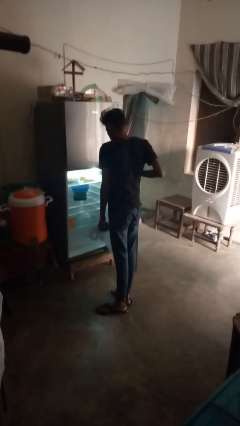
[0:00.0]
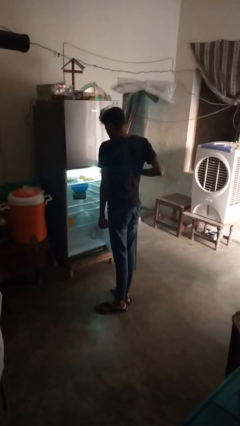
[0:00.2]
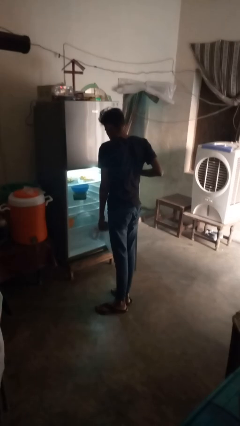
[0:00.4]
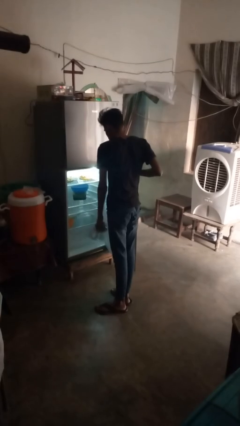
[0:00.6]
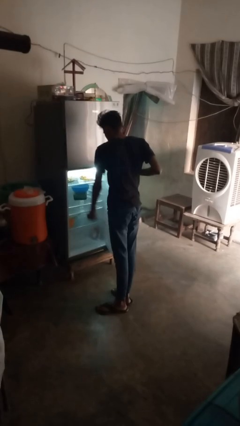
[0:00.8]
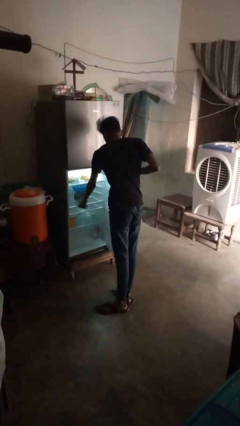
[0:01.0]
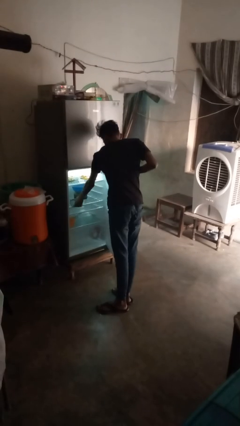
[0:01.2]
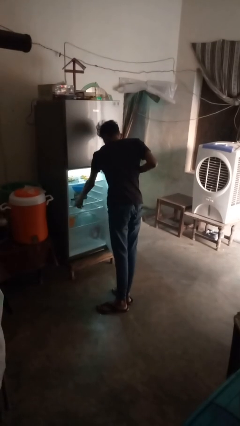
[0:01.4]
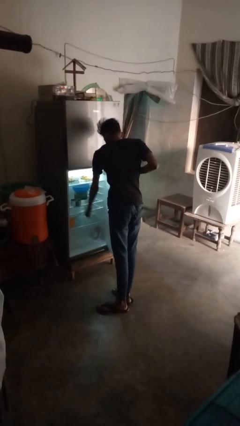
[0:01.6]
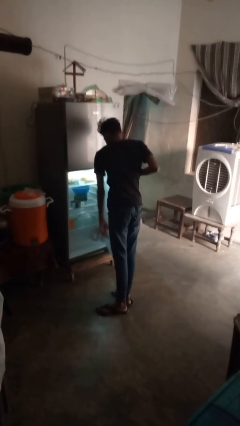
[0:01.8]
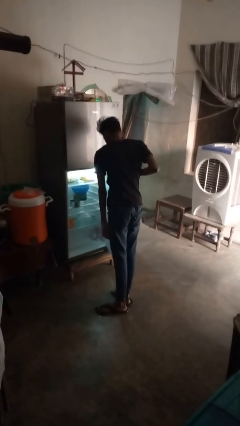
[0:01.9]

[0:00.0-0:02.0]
person puts object into refrigerator

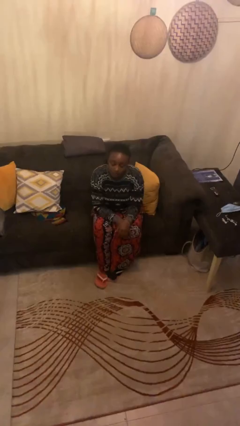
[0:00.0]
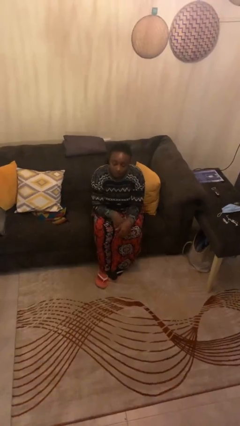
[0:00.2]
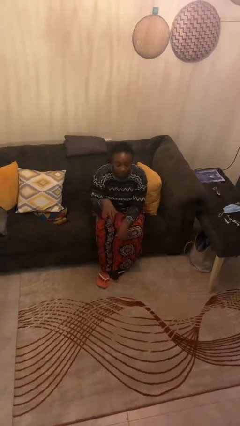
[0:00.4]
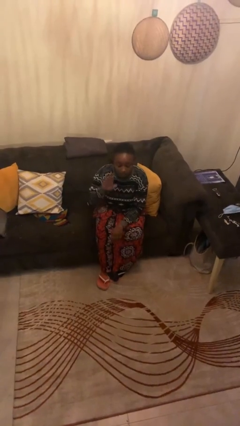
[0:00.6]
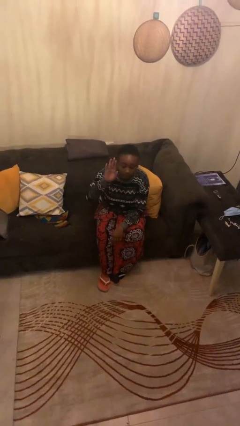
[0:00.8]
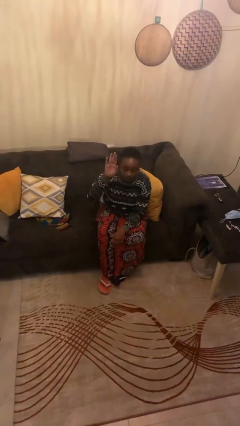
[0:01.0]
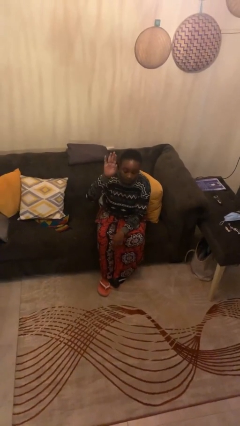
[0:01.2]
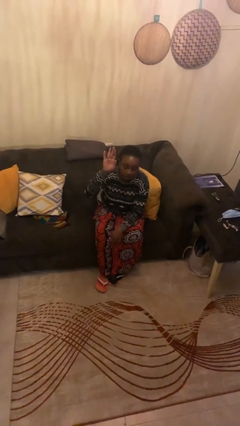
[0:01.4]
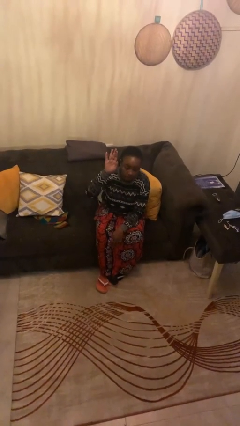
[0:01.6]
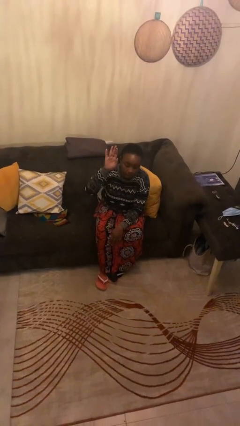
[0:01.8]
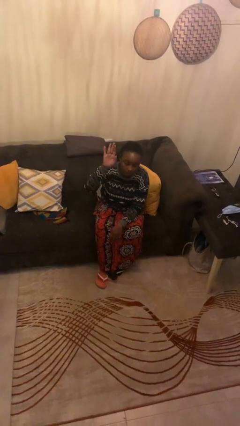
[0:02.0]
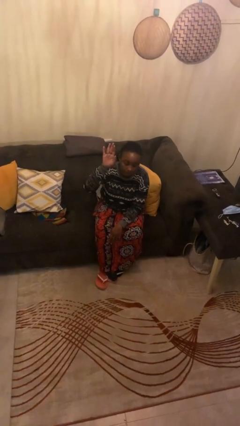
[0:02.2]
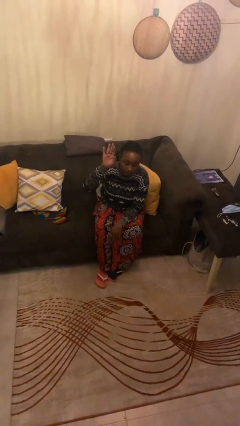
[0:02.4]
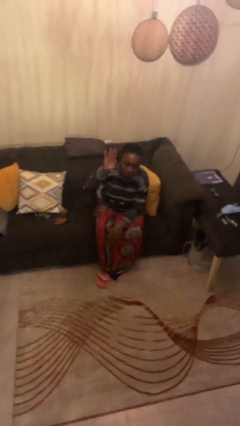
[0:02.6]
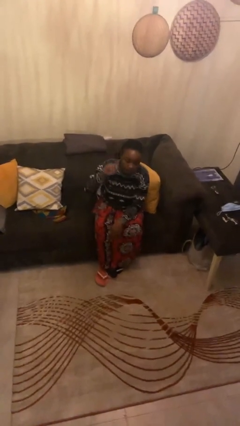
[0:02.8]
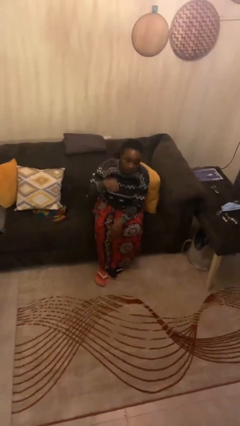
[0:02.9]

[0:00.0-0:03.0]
person gestures raise hand

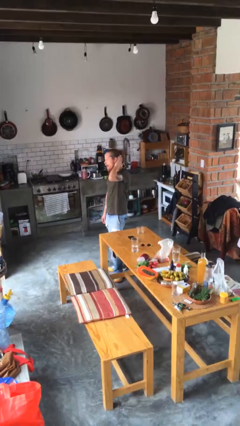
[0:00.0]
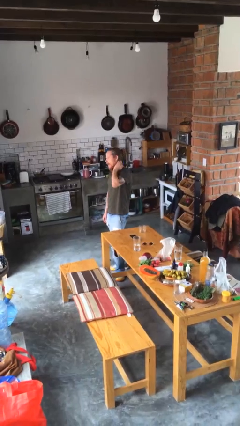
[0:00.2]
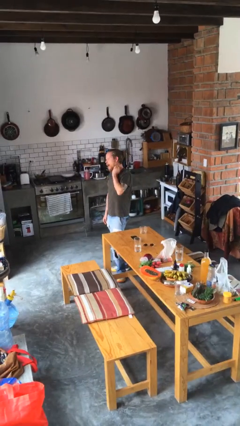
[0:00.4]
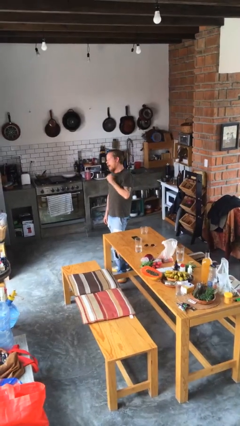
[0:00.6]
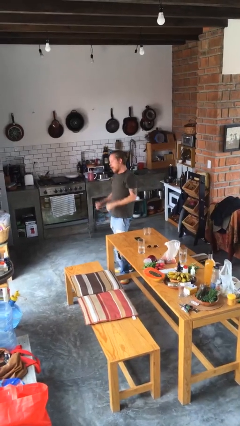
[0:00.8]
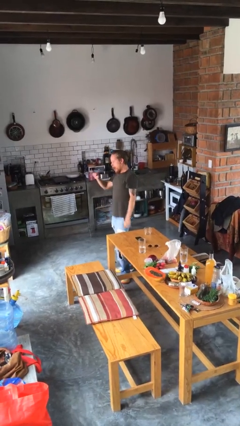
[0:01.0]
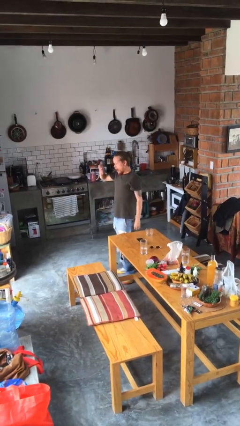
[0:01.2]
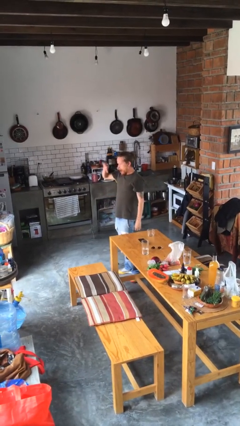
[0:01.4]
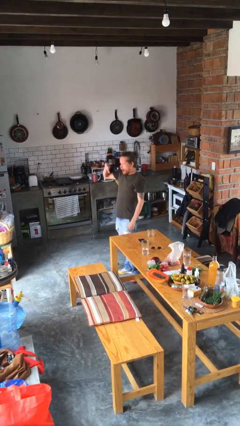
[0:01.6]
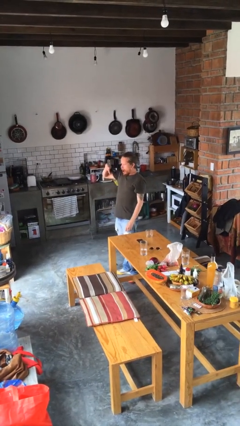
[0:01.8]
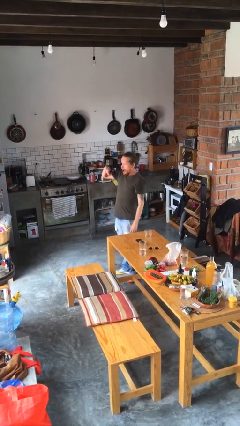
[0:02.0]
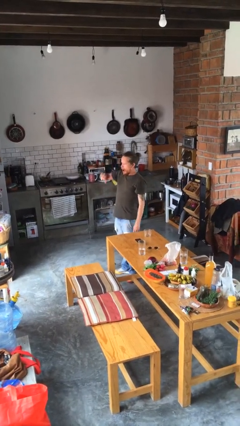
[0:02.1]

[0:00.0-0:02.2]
person gestures thumbs down

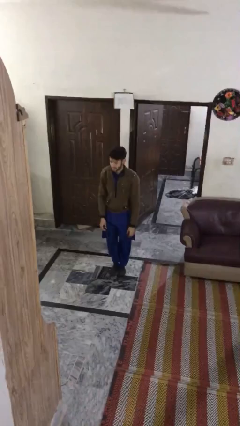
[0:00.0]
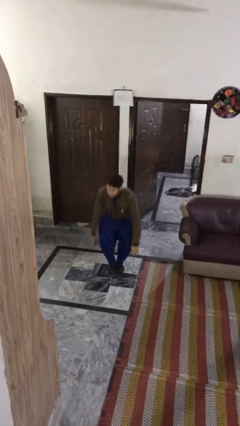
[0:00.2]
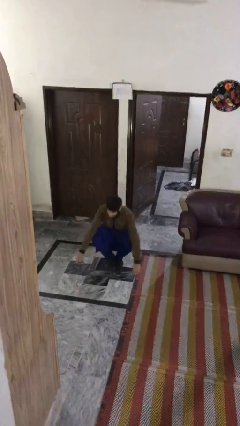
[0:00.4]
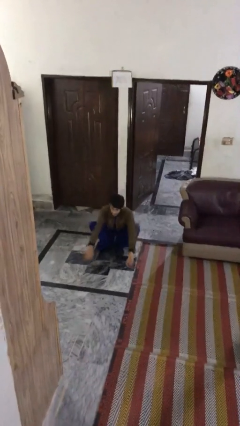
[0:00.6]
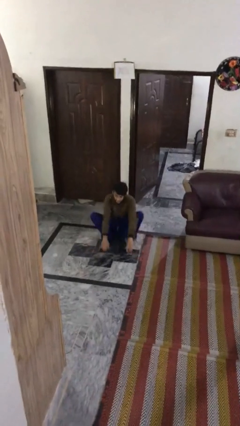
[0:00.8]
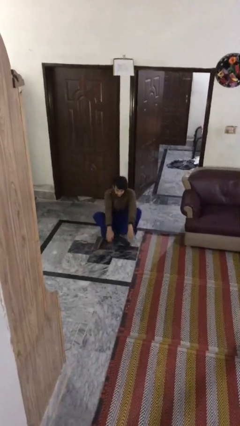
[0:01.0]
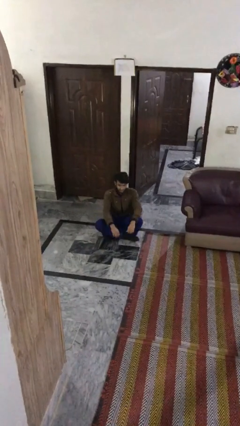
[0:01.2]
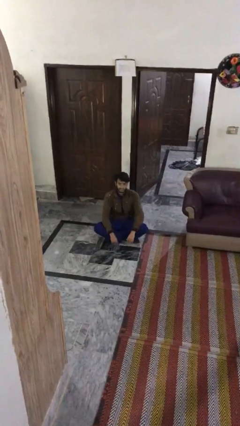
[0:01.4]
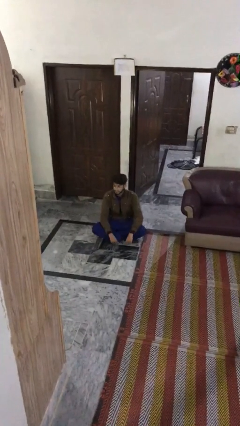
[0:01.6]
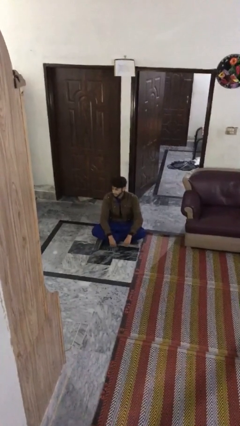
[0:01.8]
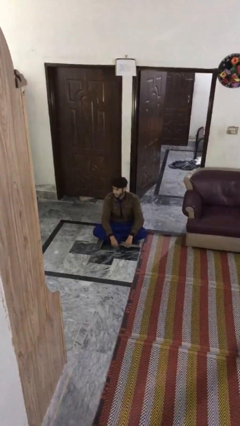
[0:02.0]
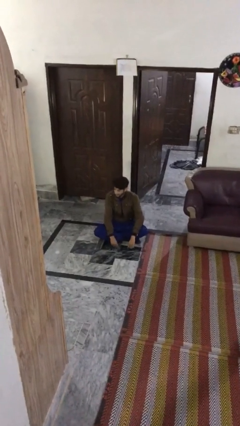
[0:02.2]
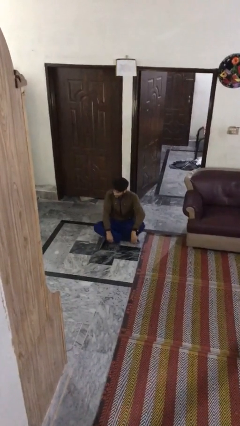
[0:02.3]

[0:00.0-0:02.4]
person sits down

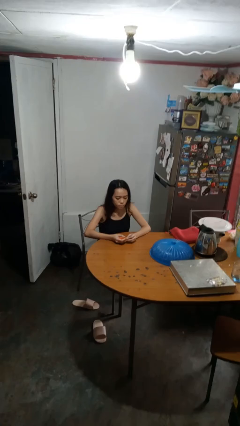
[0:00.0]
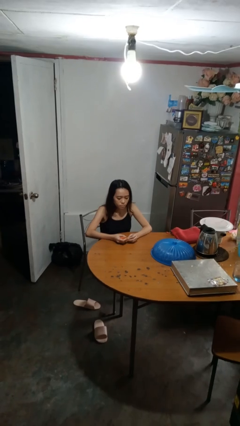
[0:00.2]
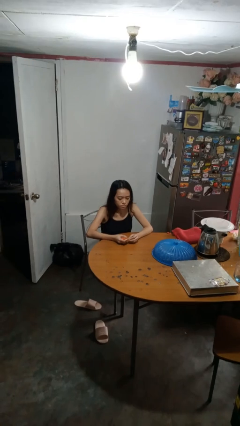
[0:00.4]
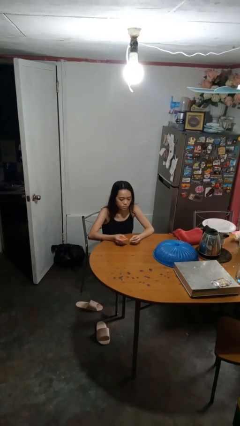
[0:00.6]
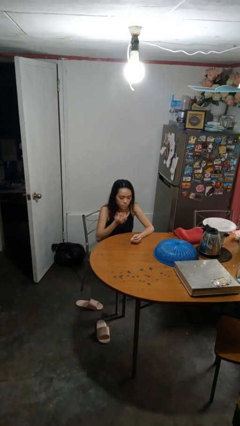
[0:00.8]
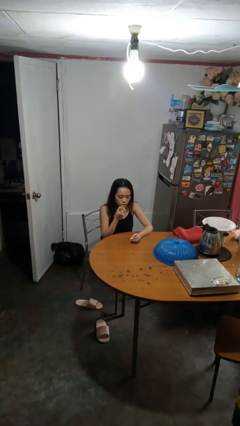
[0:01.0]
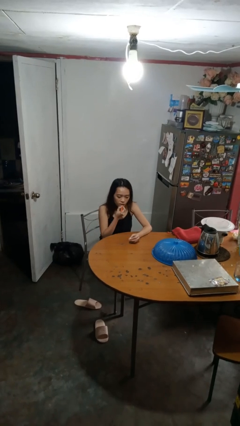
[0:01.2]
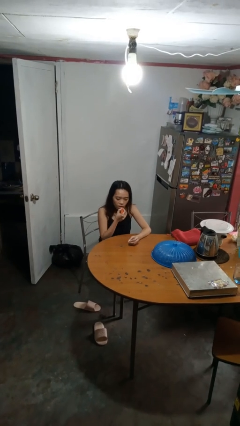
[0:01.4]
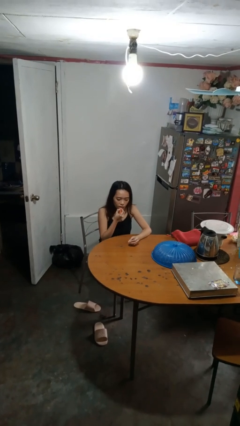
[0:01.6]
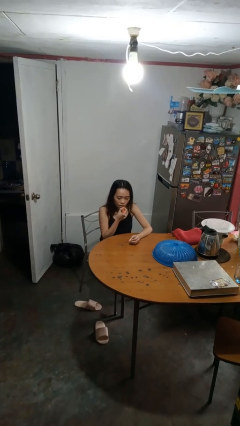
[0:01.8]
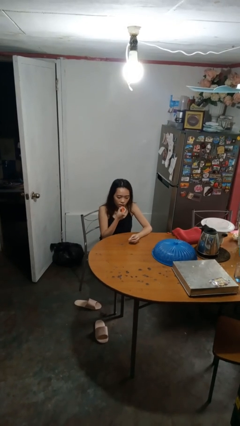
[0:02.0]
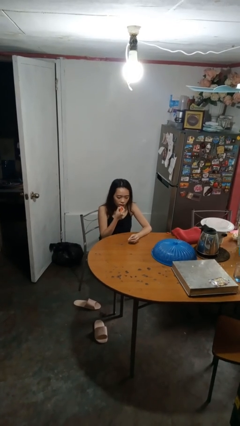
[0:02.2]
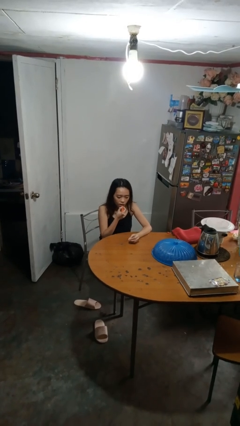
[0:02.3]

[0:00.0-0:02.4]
person applies lip makeup

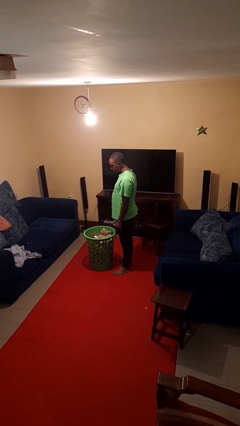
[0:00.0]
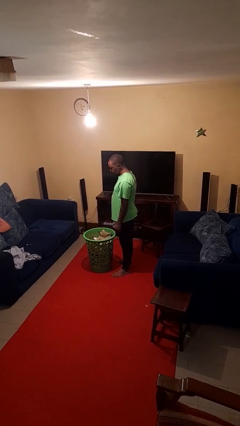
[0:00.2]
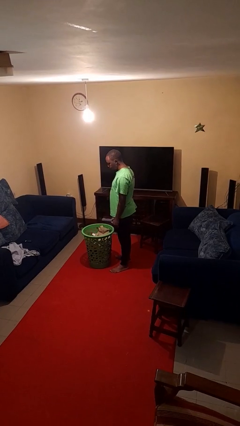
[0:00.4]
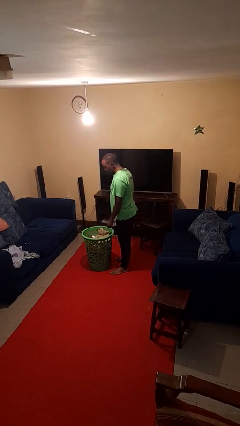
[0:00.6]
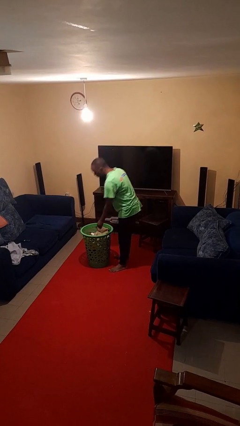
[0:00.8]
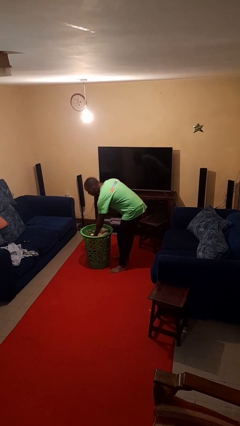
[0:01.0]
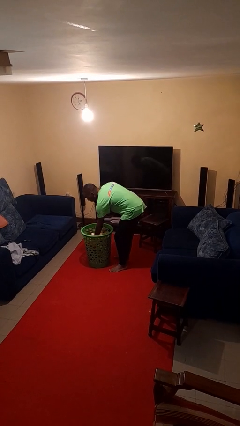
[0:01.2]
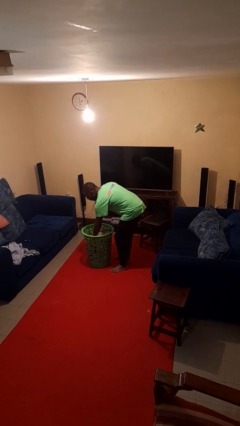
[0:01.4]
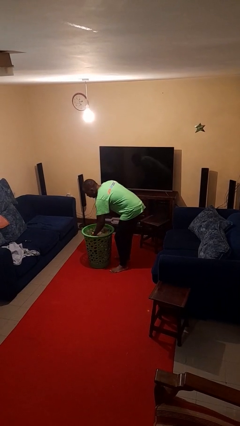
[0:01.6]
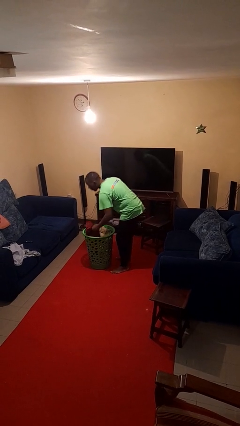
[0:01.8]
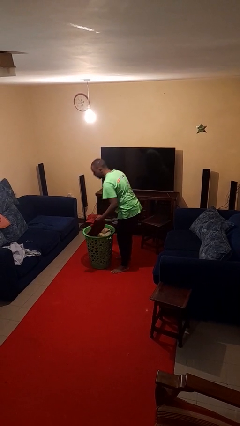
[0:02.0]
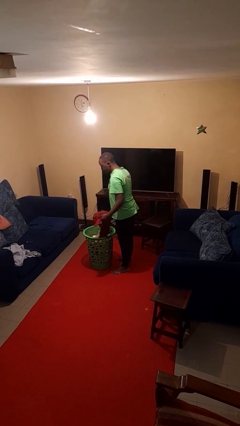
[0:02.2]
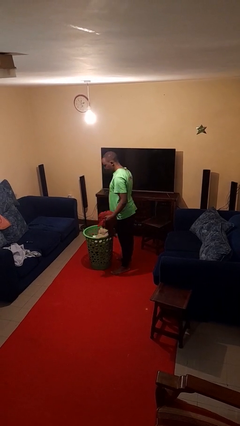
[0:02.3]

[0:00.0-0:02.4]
person takes object from basket

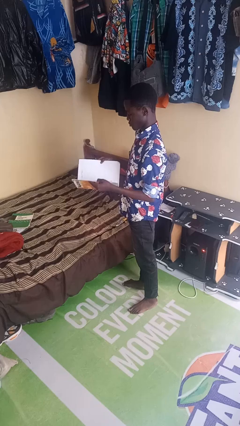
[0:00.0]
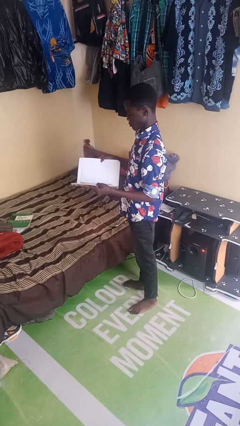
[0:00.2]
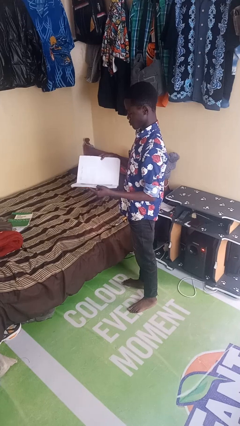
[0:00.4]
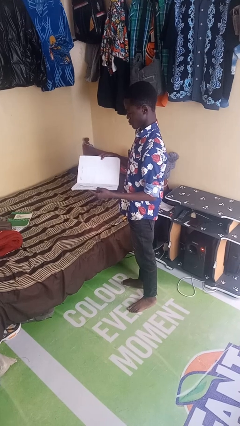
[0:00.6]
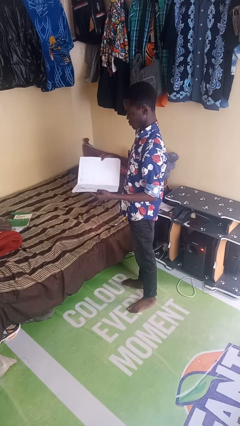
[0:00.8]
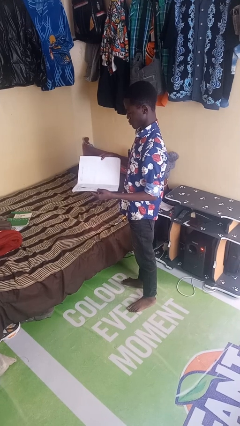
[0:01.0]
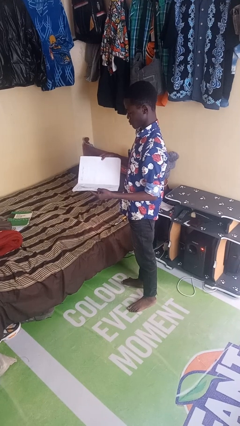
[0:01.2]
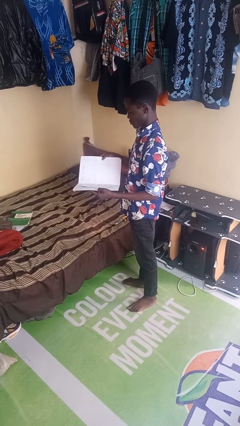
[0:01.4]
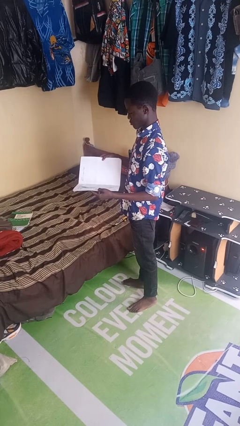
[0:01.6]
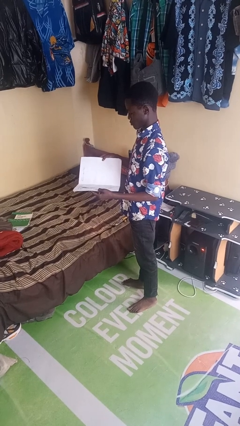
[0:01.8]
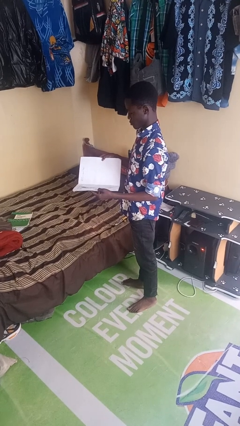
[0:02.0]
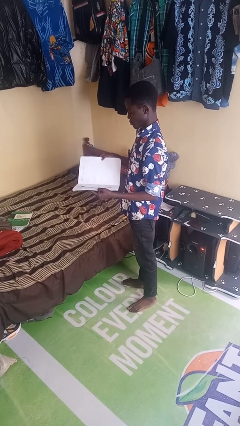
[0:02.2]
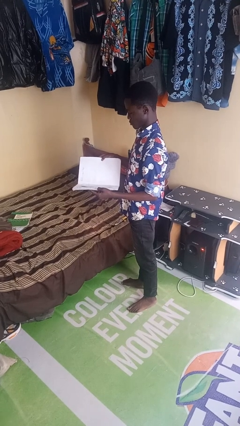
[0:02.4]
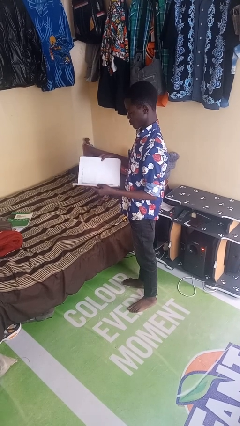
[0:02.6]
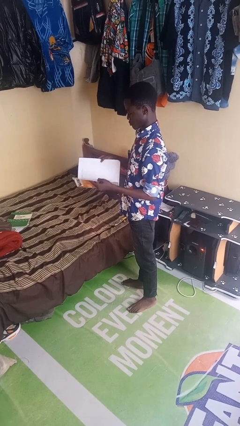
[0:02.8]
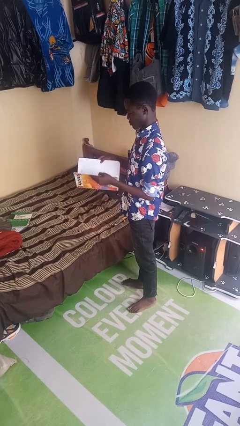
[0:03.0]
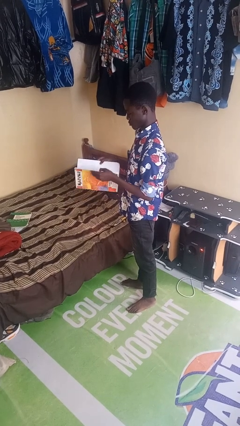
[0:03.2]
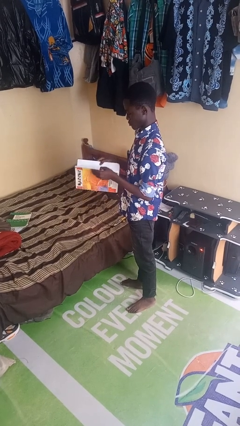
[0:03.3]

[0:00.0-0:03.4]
person reads book
